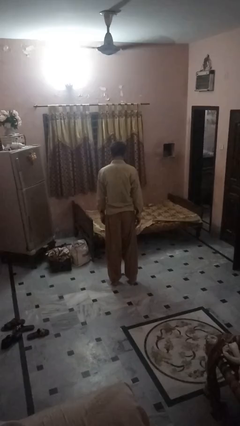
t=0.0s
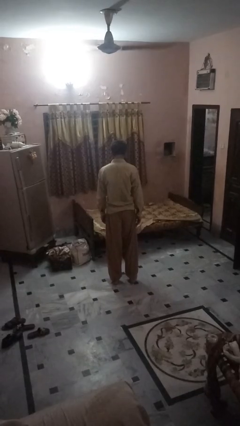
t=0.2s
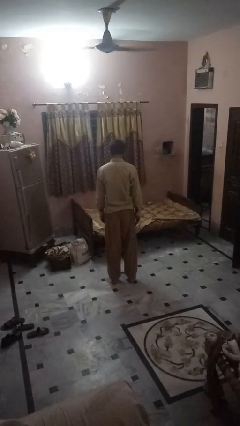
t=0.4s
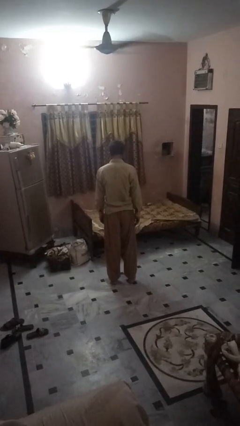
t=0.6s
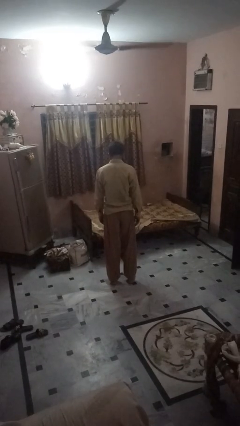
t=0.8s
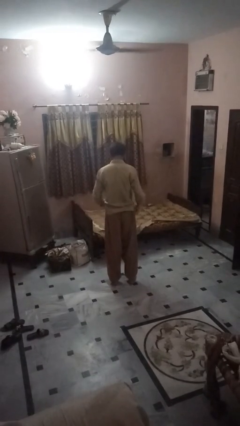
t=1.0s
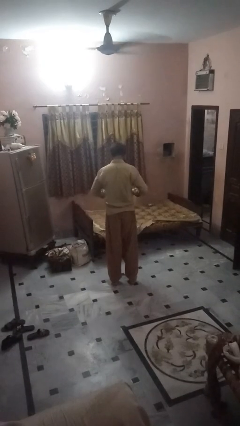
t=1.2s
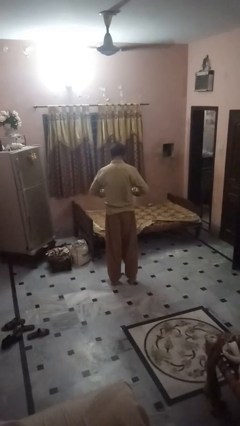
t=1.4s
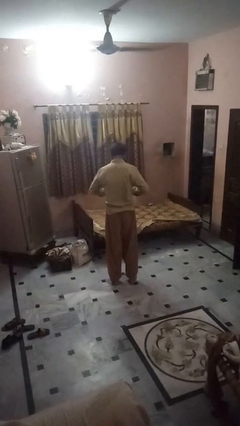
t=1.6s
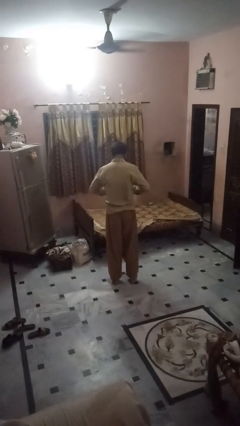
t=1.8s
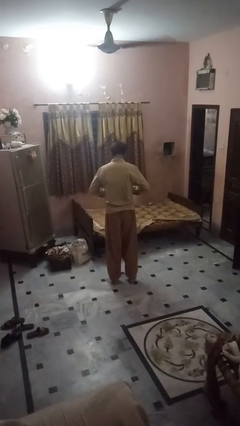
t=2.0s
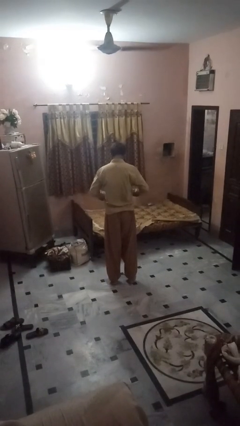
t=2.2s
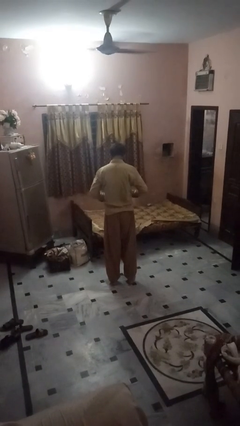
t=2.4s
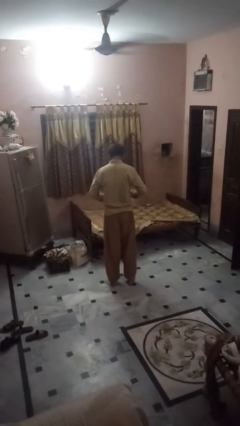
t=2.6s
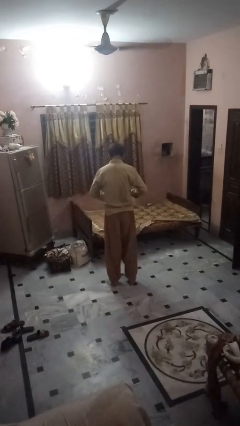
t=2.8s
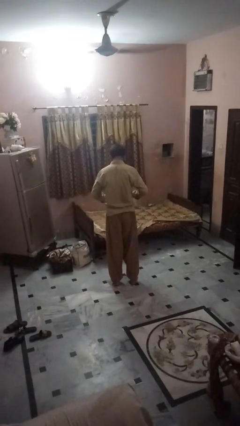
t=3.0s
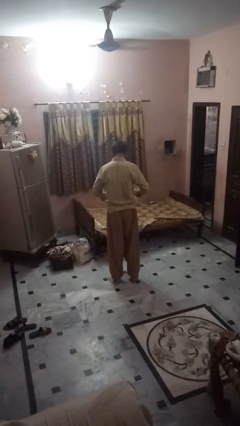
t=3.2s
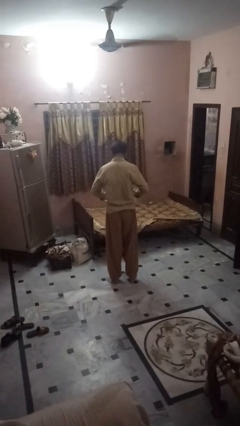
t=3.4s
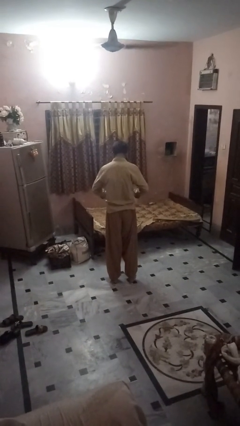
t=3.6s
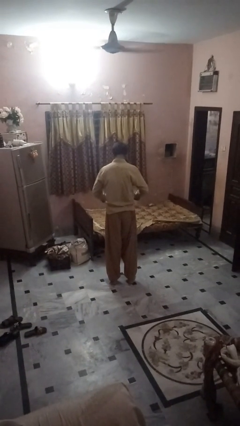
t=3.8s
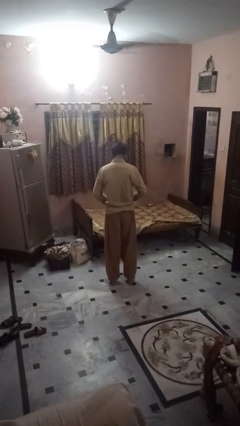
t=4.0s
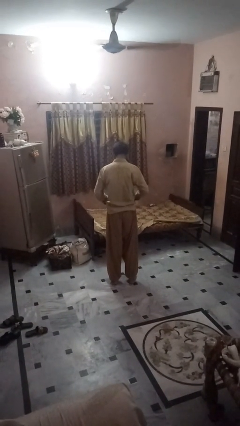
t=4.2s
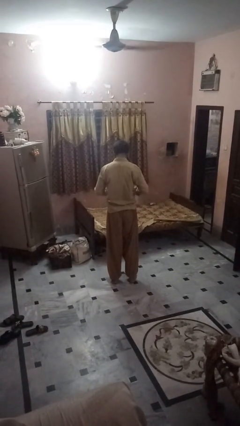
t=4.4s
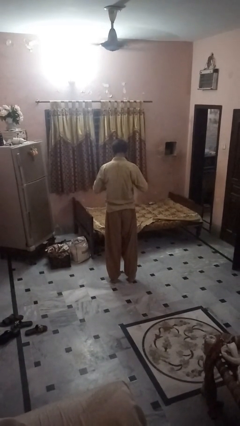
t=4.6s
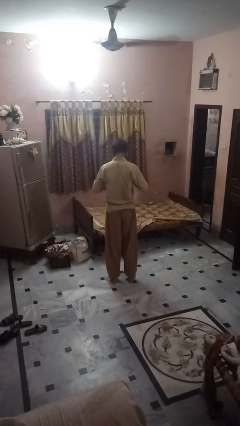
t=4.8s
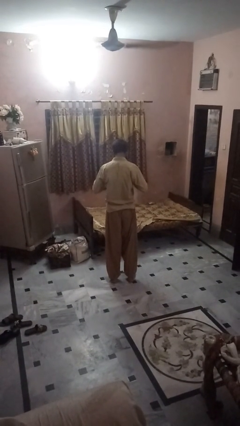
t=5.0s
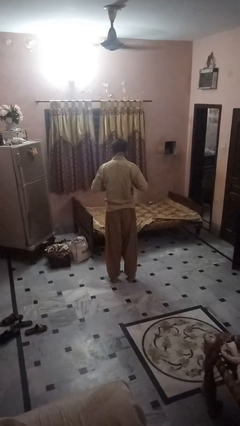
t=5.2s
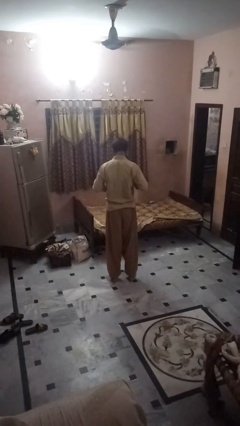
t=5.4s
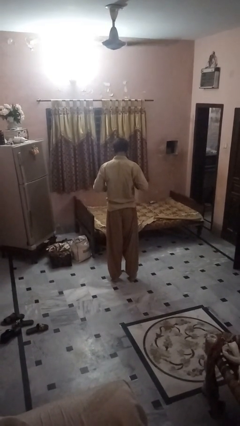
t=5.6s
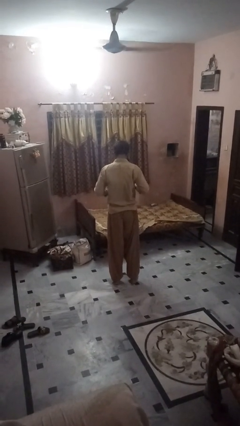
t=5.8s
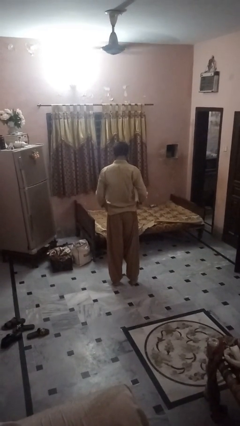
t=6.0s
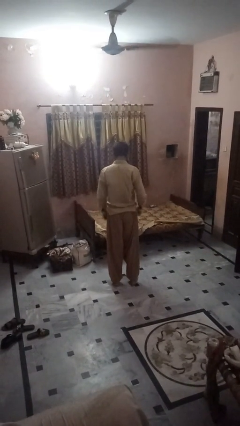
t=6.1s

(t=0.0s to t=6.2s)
person unbuttons shirt

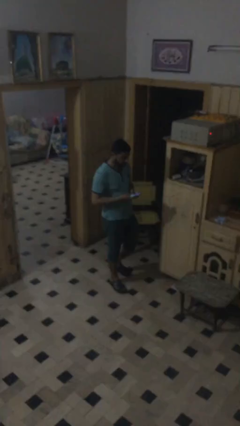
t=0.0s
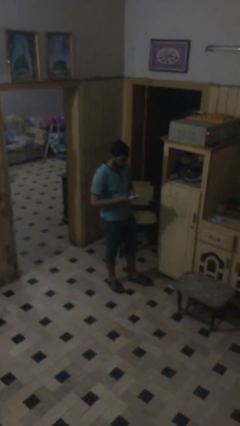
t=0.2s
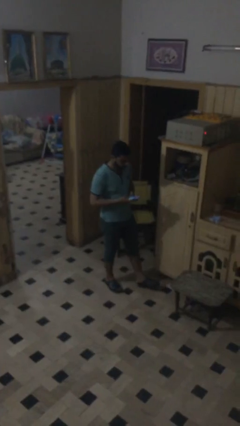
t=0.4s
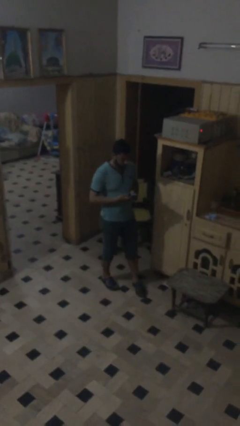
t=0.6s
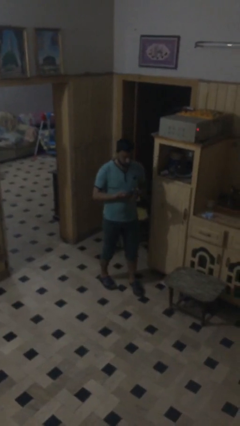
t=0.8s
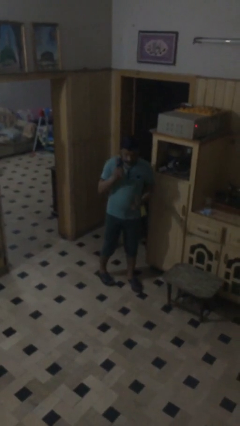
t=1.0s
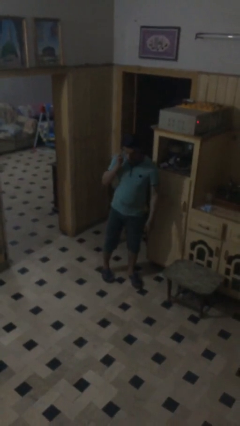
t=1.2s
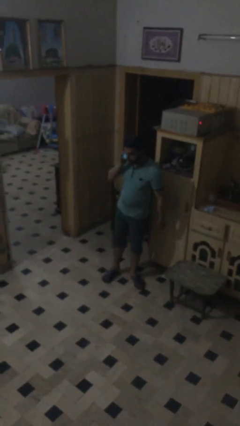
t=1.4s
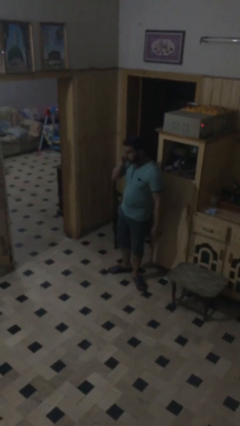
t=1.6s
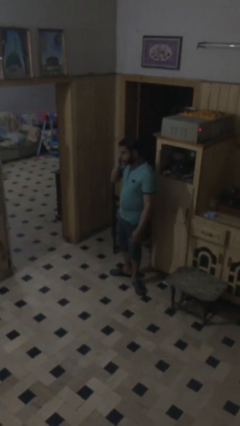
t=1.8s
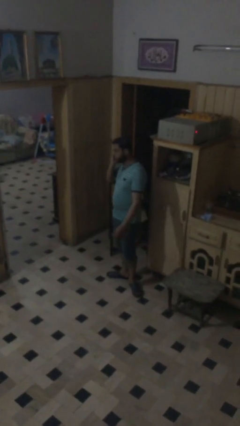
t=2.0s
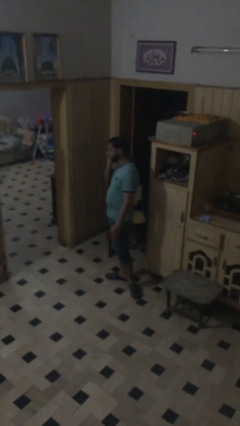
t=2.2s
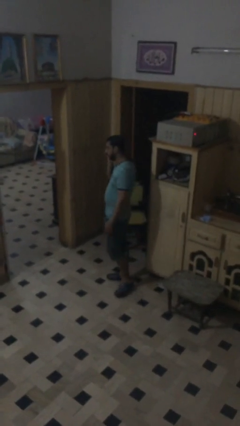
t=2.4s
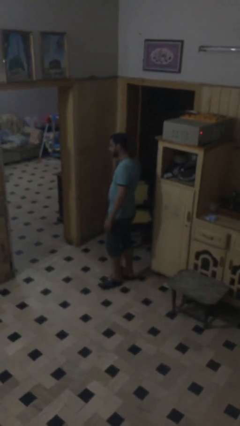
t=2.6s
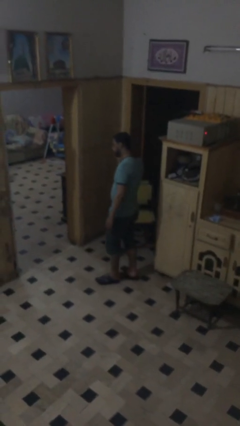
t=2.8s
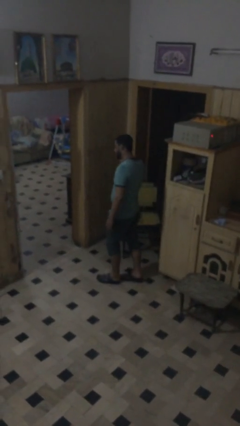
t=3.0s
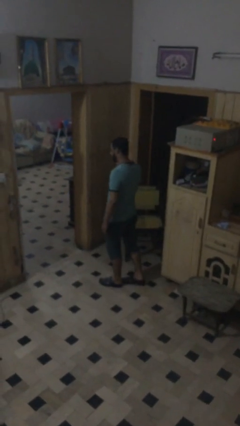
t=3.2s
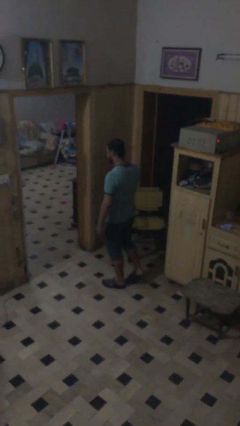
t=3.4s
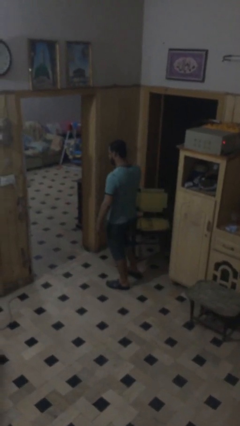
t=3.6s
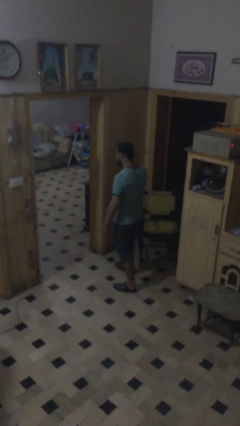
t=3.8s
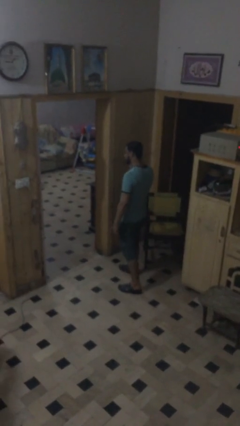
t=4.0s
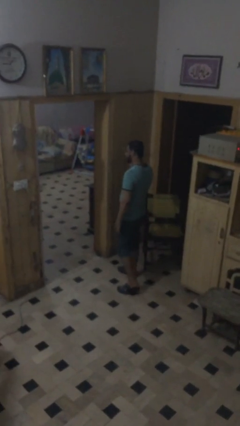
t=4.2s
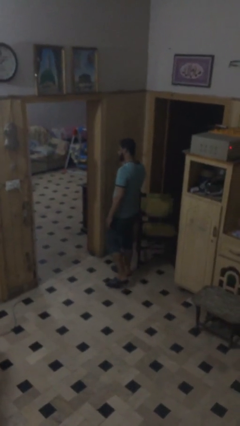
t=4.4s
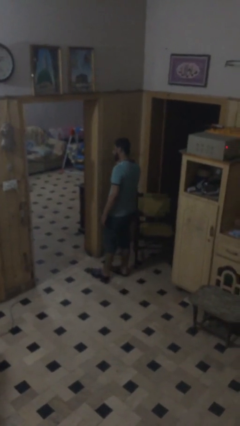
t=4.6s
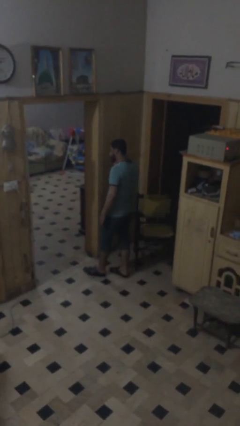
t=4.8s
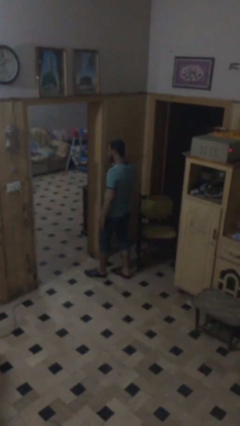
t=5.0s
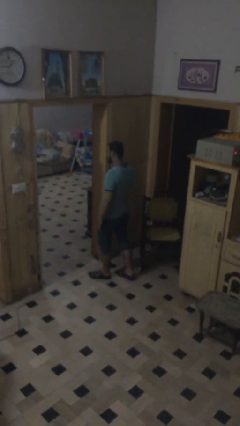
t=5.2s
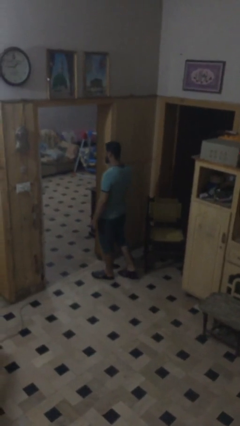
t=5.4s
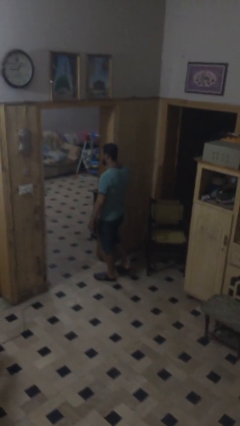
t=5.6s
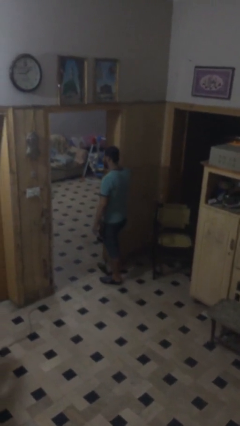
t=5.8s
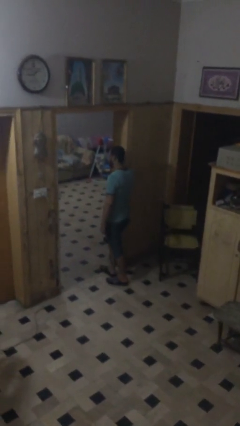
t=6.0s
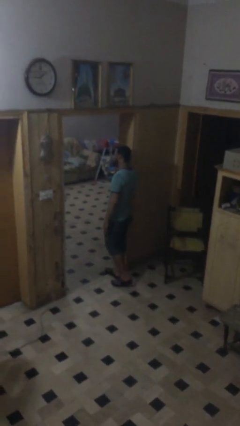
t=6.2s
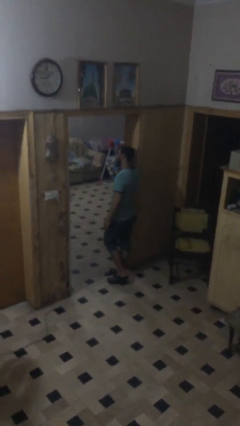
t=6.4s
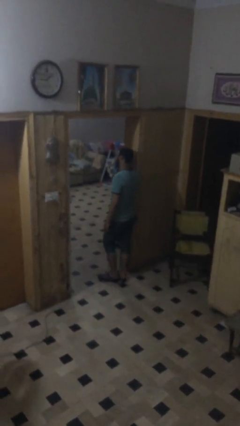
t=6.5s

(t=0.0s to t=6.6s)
person talks on phone

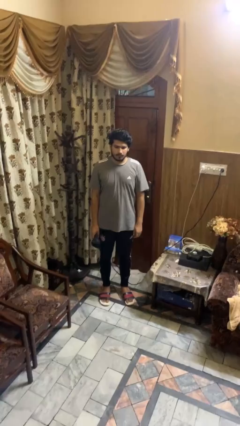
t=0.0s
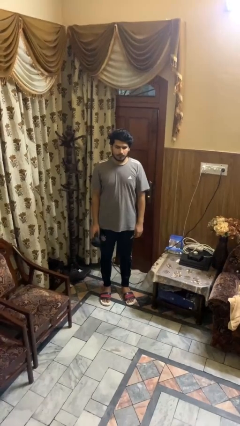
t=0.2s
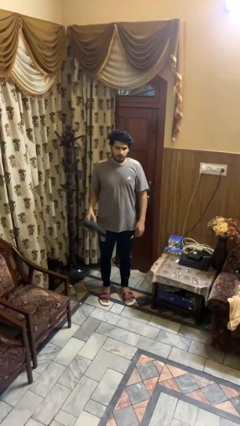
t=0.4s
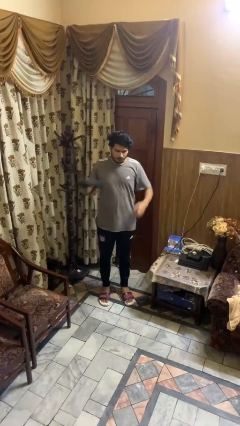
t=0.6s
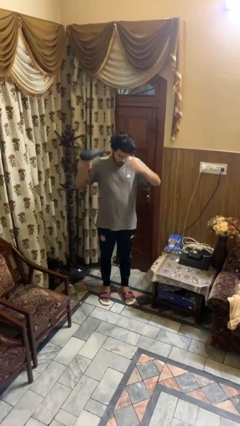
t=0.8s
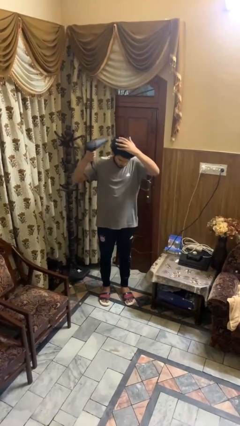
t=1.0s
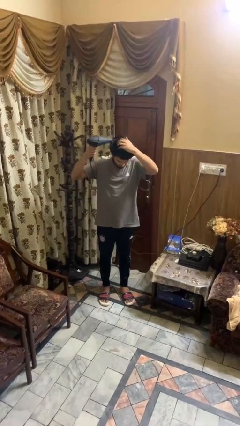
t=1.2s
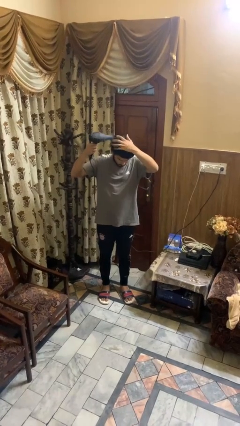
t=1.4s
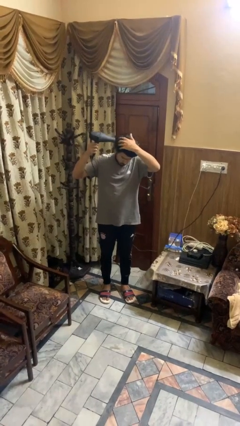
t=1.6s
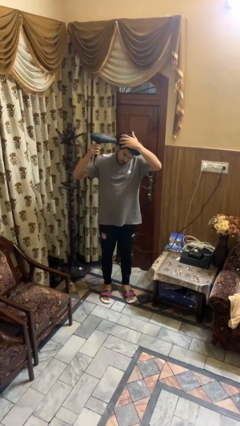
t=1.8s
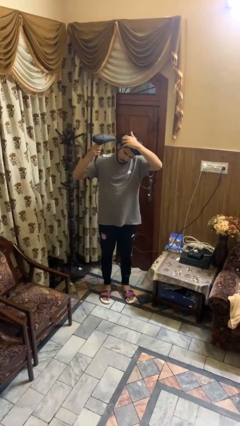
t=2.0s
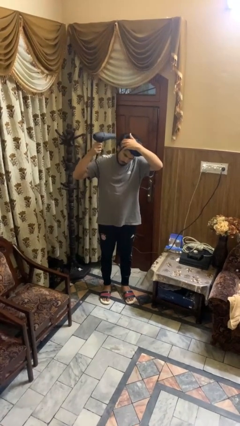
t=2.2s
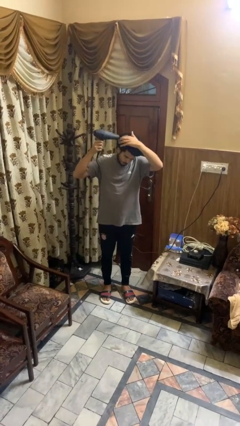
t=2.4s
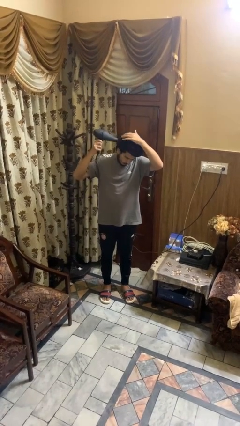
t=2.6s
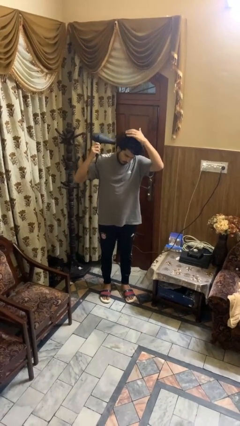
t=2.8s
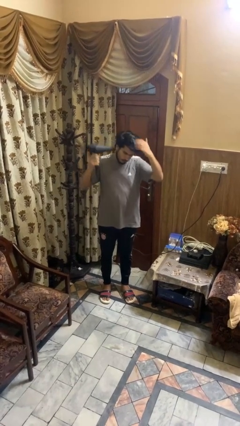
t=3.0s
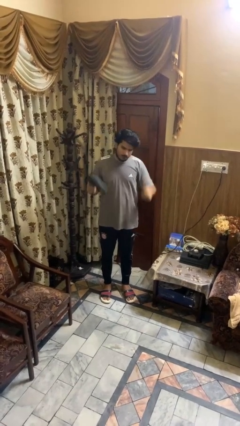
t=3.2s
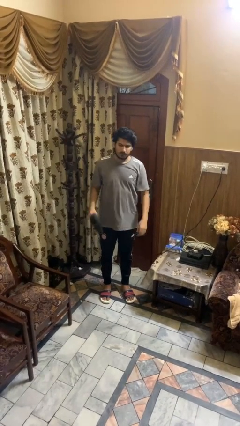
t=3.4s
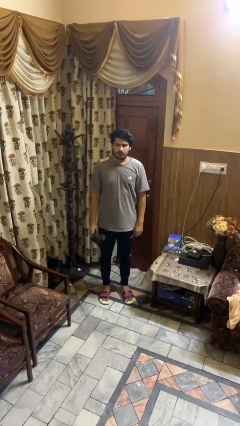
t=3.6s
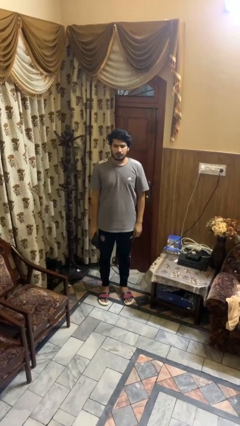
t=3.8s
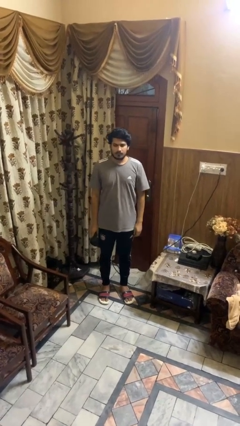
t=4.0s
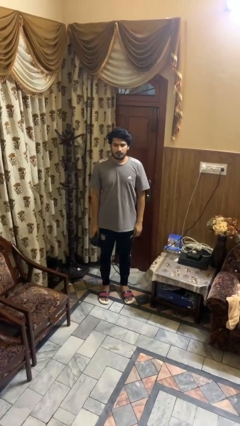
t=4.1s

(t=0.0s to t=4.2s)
person dries hair with hairdryer

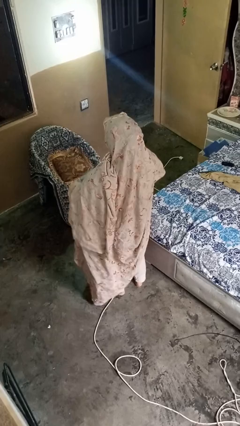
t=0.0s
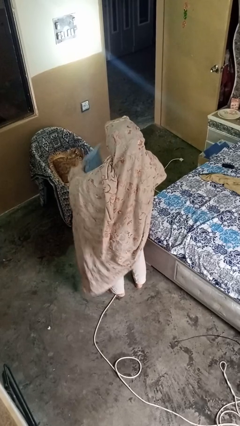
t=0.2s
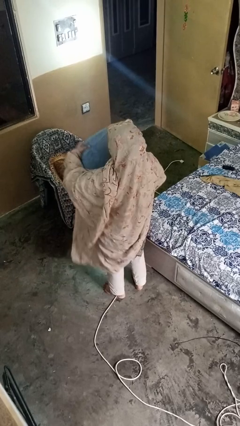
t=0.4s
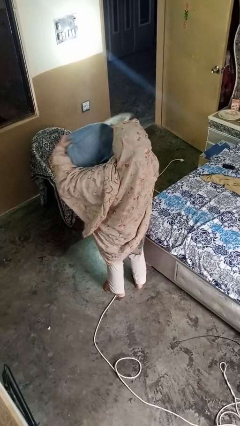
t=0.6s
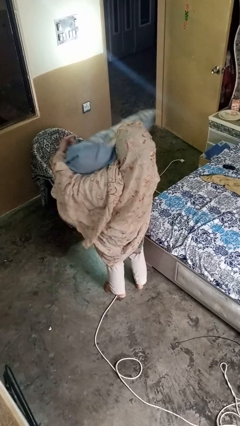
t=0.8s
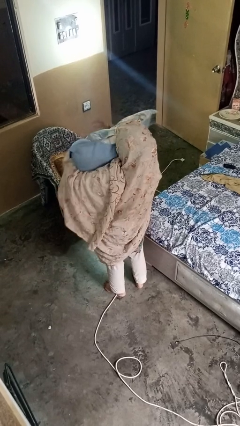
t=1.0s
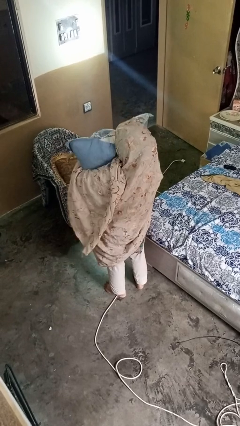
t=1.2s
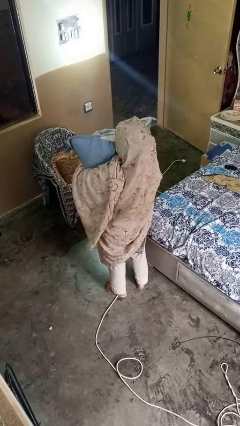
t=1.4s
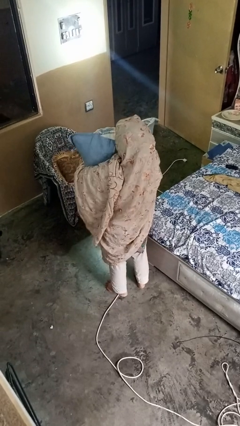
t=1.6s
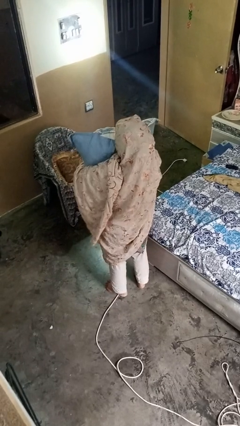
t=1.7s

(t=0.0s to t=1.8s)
person squeezes object
